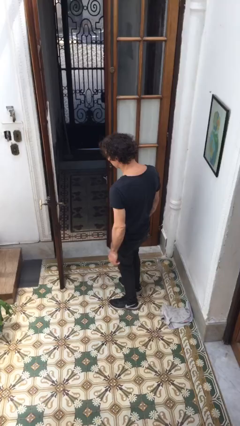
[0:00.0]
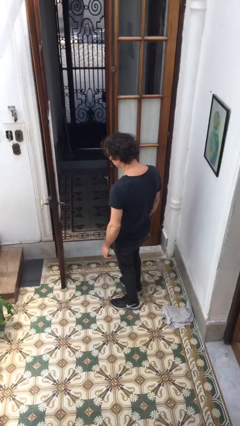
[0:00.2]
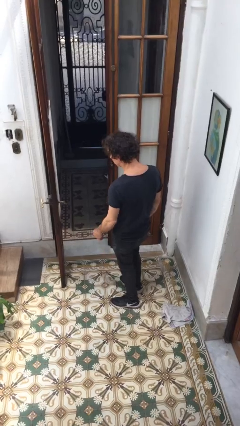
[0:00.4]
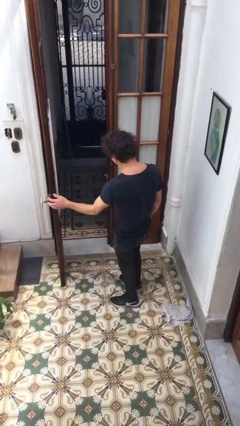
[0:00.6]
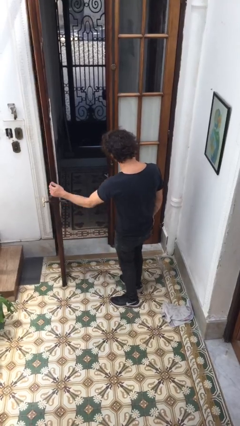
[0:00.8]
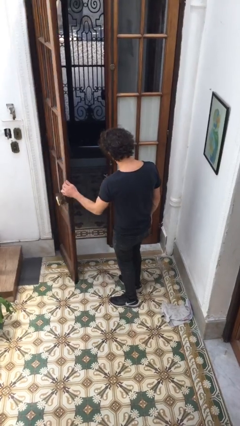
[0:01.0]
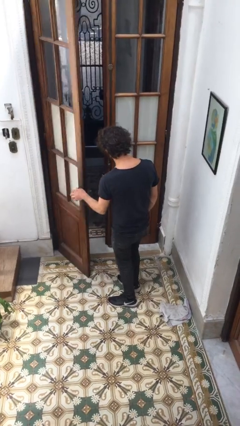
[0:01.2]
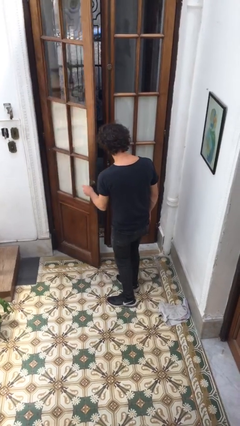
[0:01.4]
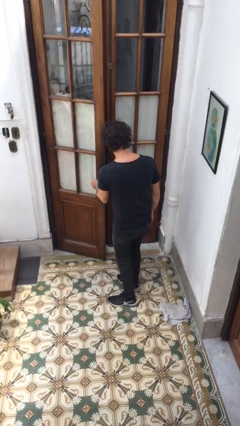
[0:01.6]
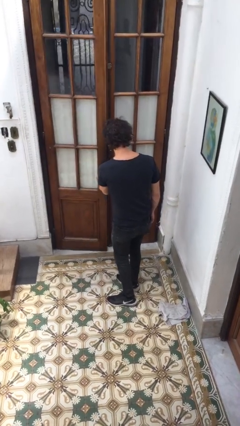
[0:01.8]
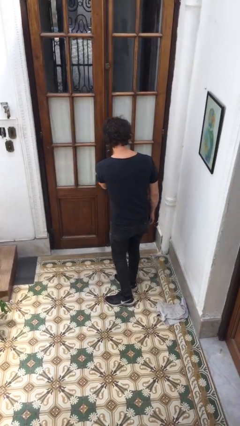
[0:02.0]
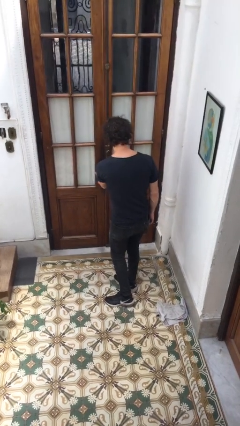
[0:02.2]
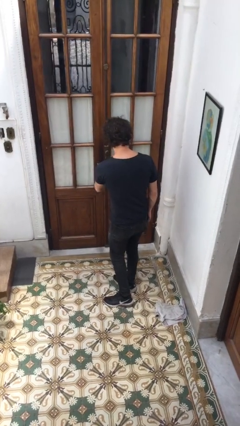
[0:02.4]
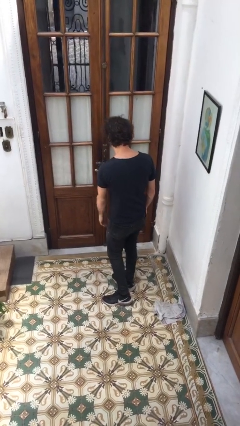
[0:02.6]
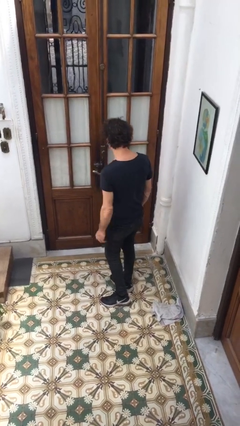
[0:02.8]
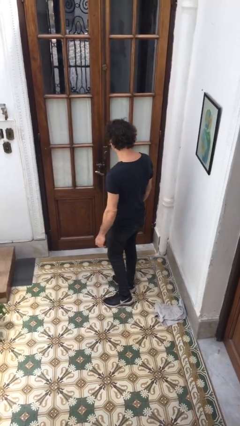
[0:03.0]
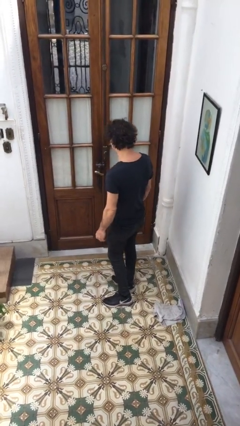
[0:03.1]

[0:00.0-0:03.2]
person closes facility door

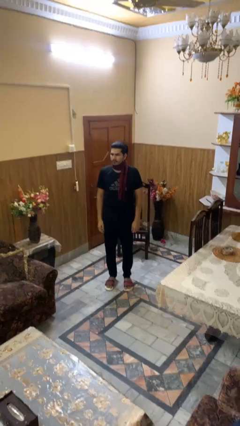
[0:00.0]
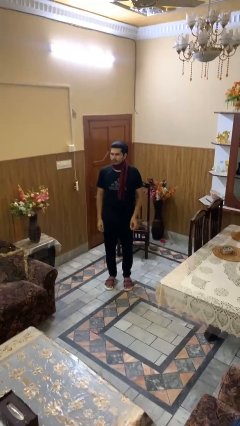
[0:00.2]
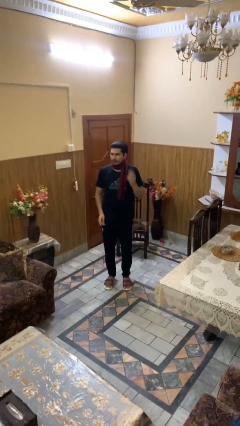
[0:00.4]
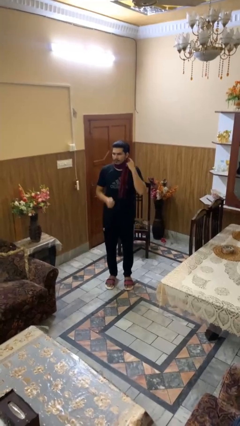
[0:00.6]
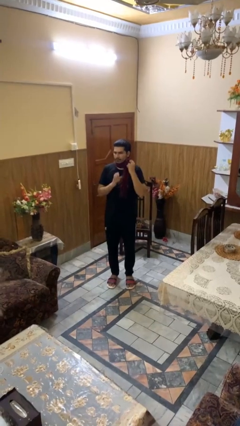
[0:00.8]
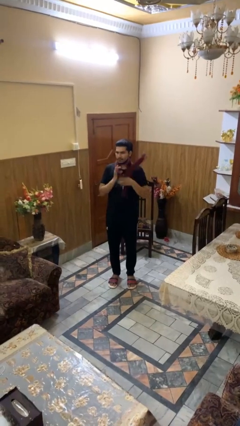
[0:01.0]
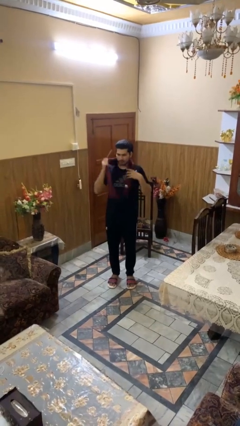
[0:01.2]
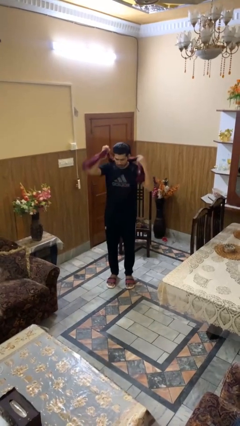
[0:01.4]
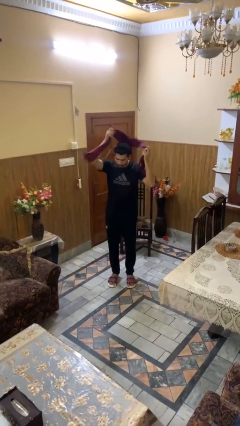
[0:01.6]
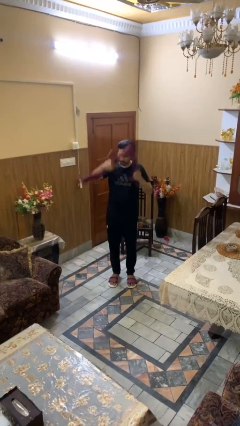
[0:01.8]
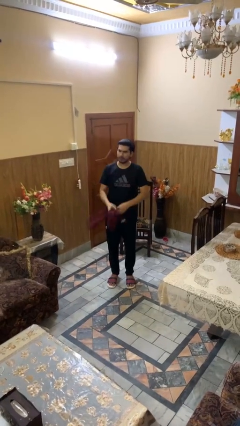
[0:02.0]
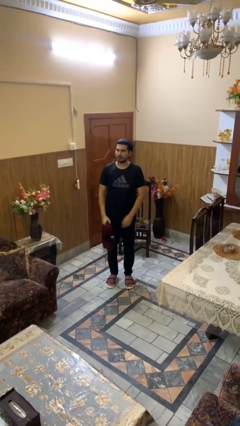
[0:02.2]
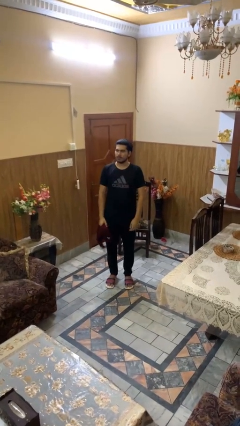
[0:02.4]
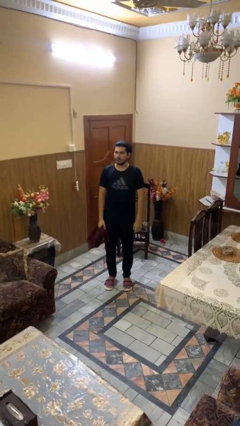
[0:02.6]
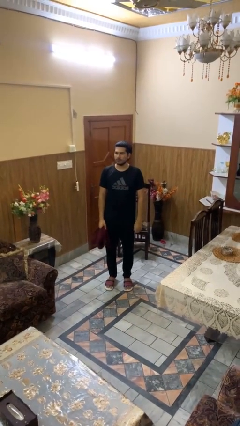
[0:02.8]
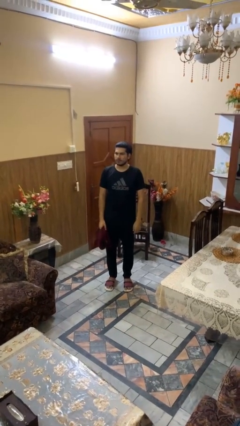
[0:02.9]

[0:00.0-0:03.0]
person takes off scarf

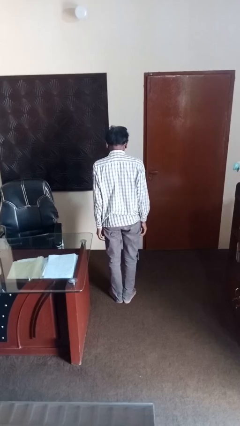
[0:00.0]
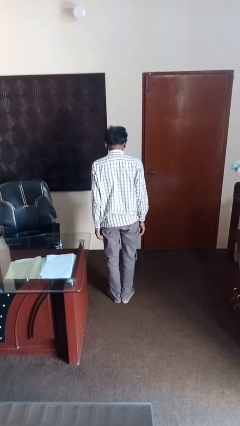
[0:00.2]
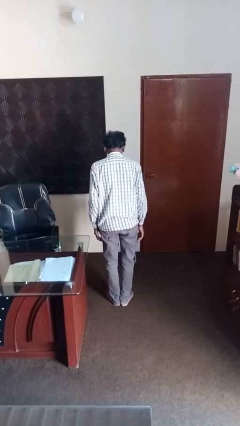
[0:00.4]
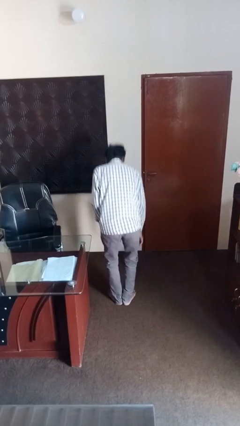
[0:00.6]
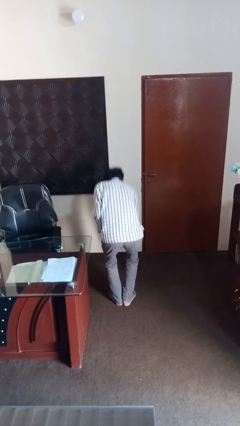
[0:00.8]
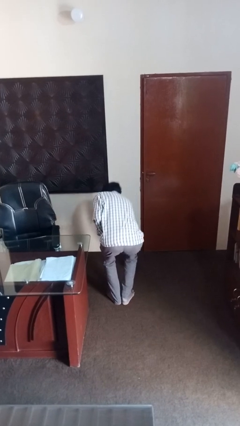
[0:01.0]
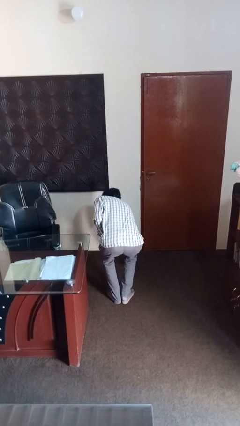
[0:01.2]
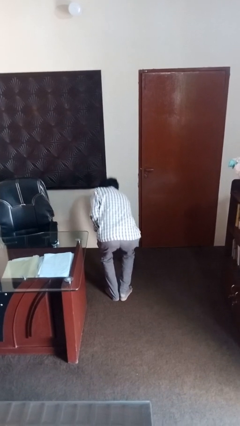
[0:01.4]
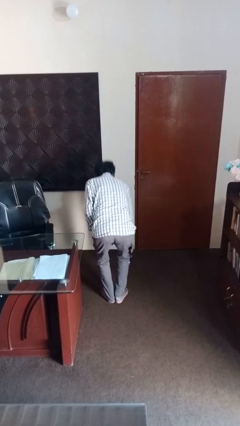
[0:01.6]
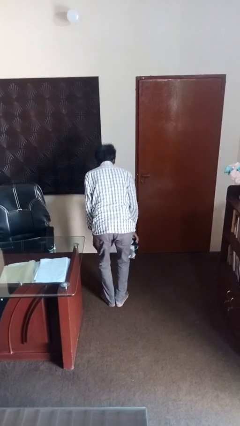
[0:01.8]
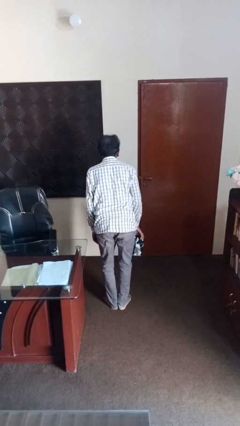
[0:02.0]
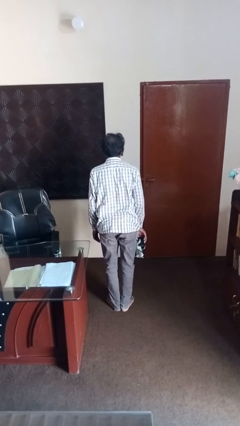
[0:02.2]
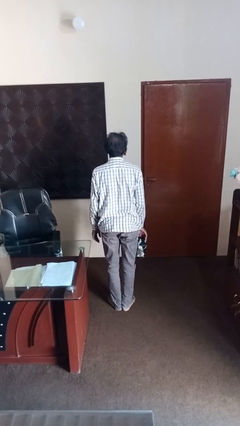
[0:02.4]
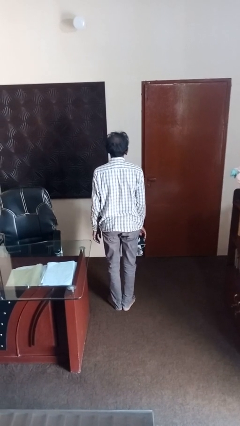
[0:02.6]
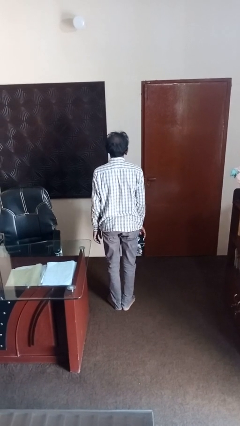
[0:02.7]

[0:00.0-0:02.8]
person picks up object from floor

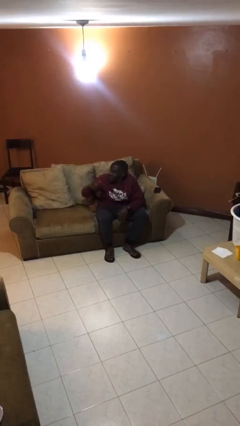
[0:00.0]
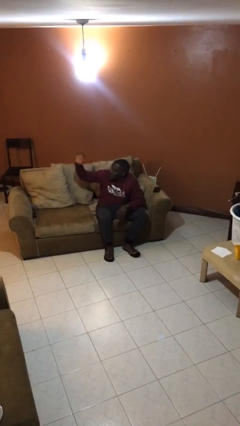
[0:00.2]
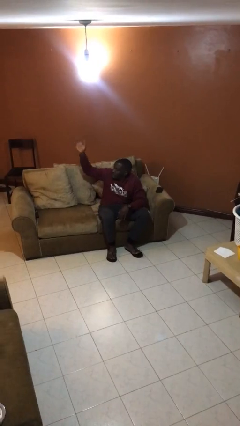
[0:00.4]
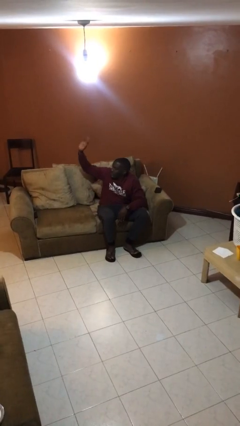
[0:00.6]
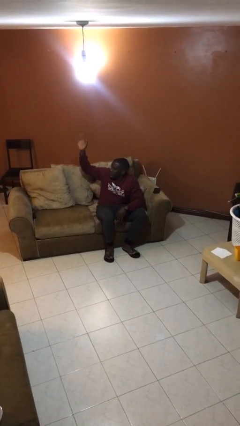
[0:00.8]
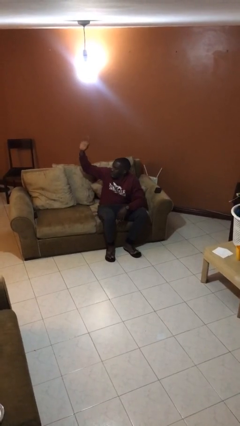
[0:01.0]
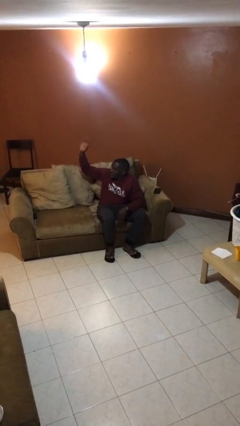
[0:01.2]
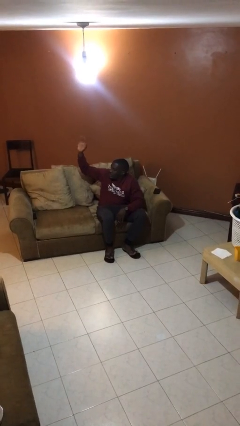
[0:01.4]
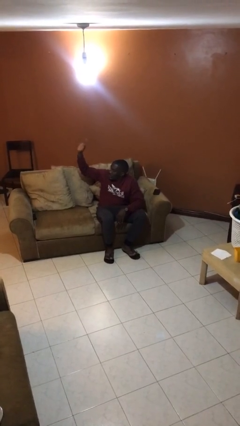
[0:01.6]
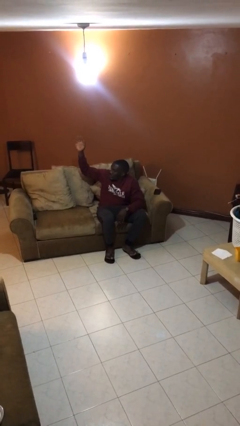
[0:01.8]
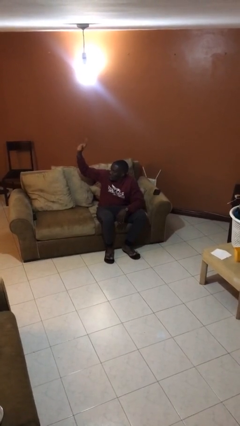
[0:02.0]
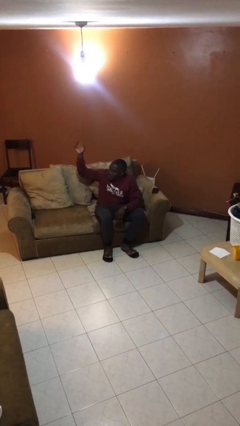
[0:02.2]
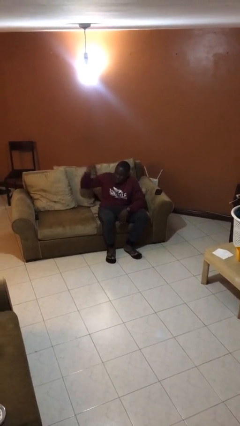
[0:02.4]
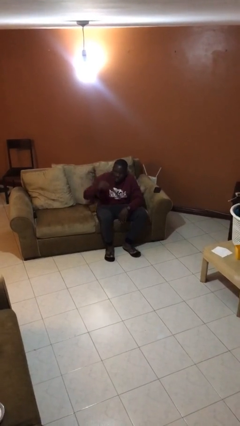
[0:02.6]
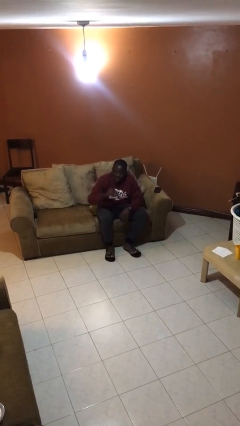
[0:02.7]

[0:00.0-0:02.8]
person waves at person

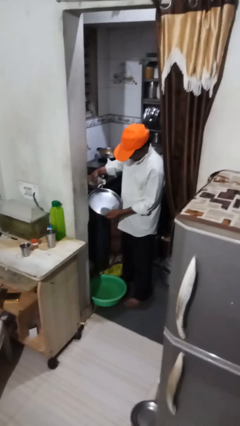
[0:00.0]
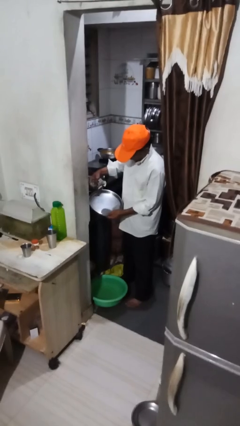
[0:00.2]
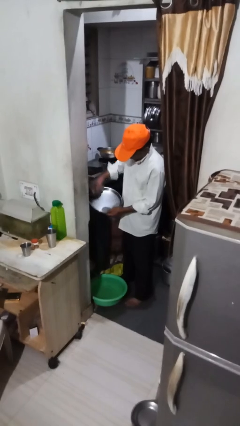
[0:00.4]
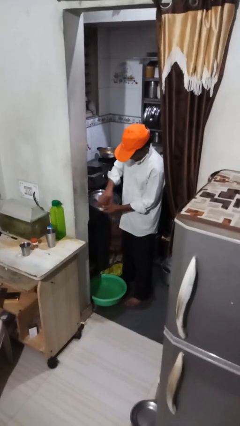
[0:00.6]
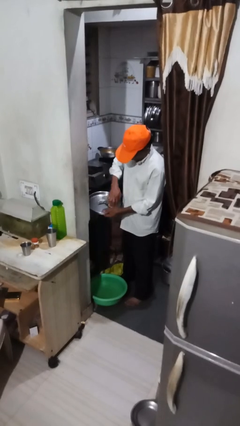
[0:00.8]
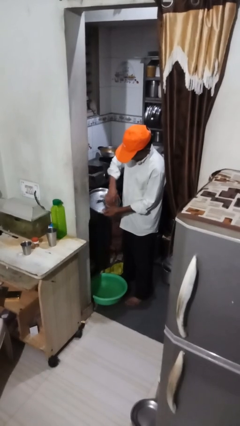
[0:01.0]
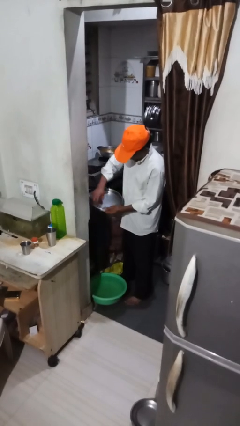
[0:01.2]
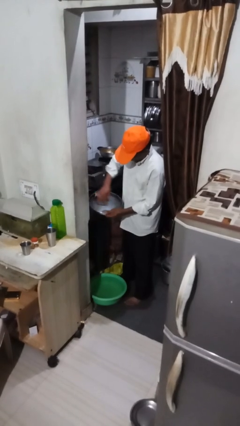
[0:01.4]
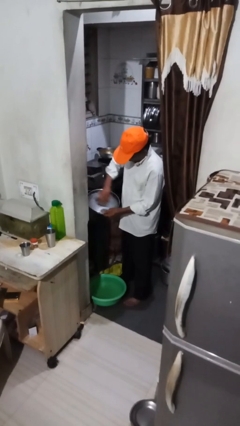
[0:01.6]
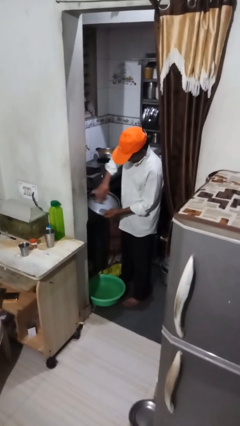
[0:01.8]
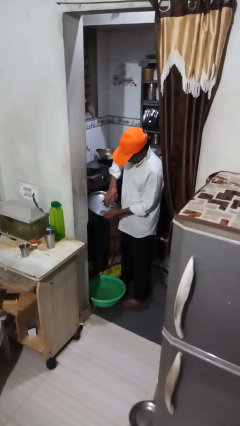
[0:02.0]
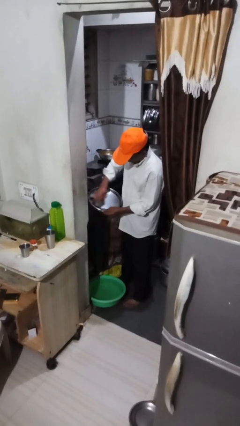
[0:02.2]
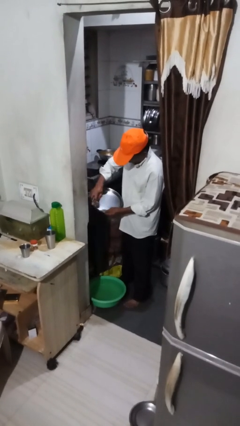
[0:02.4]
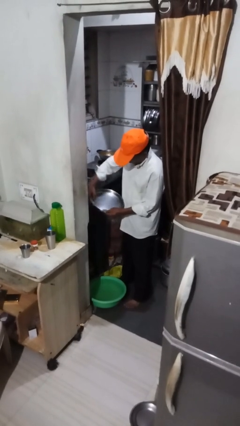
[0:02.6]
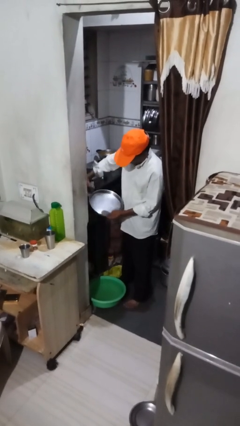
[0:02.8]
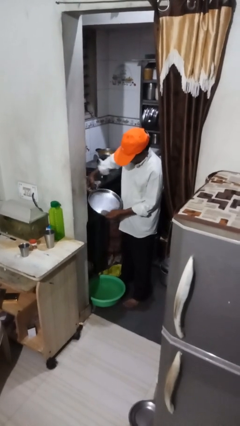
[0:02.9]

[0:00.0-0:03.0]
person dries dish

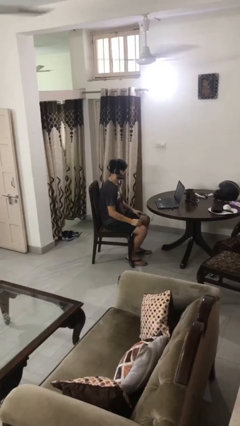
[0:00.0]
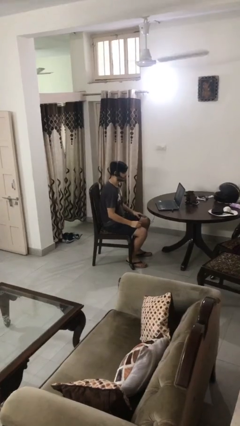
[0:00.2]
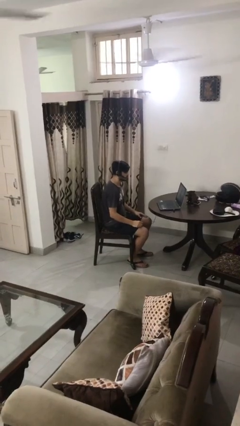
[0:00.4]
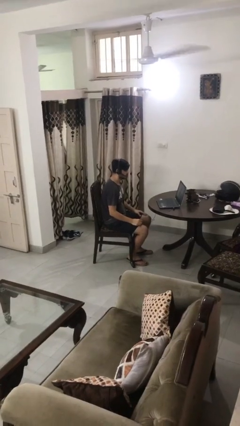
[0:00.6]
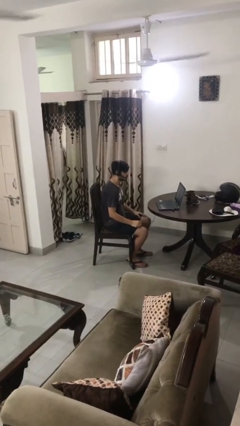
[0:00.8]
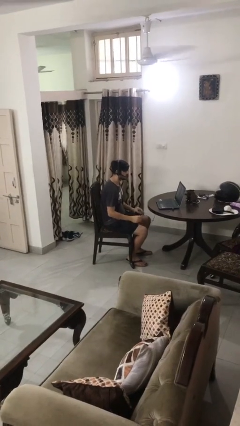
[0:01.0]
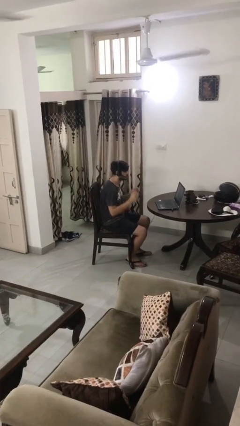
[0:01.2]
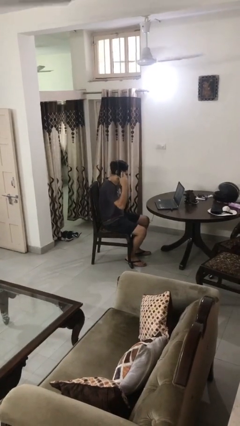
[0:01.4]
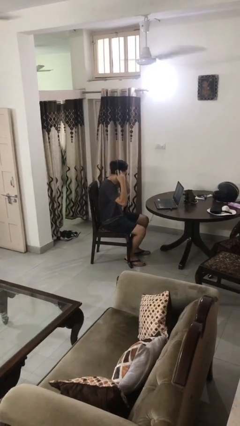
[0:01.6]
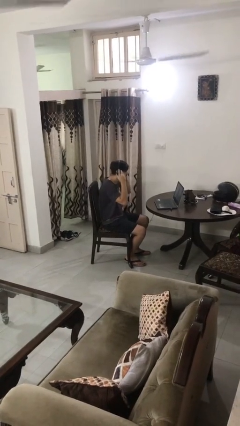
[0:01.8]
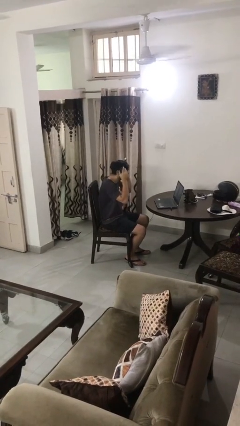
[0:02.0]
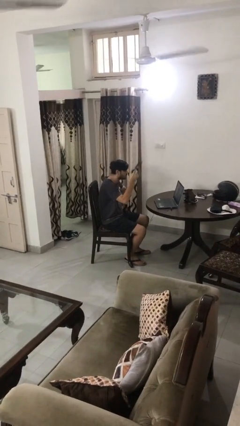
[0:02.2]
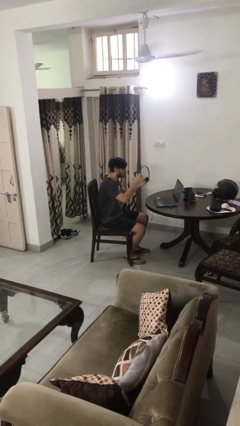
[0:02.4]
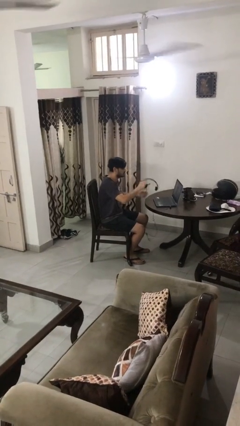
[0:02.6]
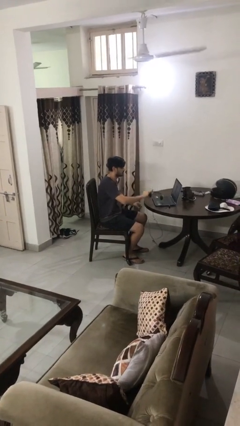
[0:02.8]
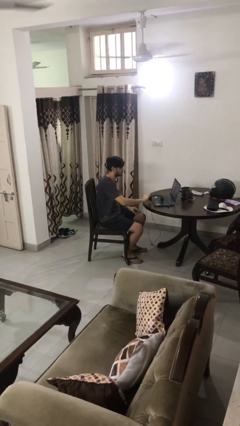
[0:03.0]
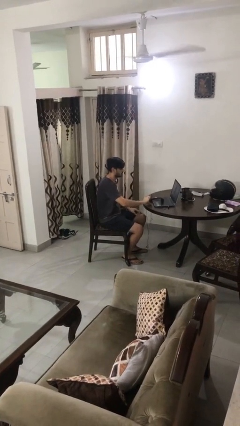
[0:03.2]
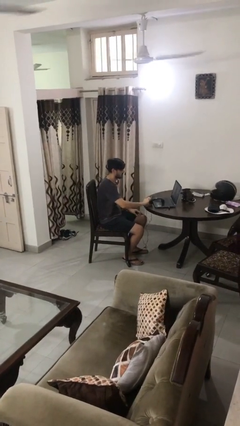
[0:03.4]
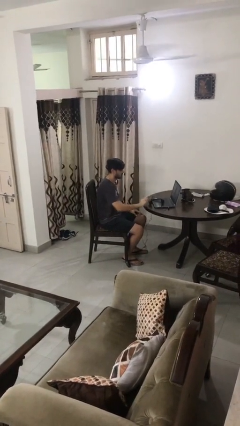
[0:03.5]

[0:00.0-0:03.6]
person takes off headphones
